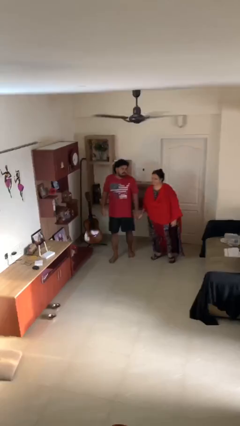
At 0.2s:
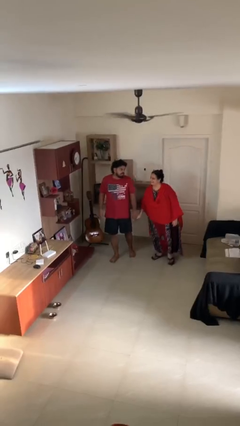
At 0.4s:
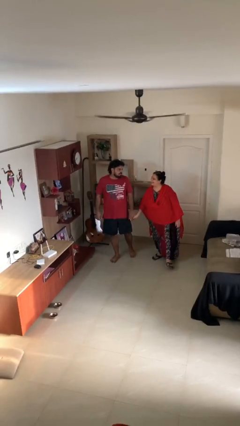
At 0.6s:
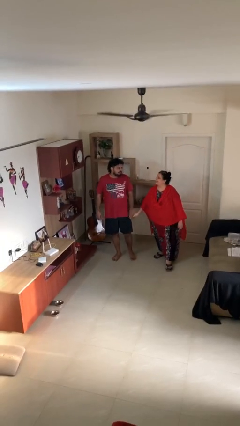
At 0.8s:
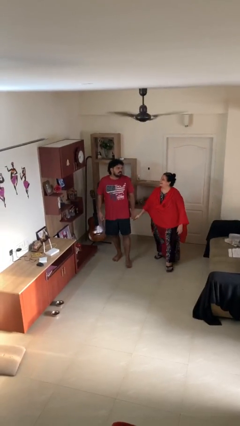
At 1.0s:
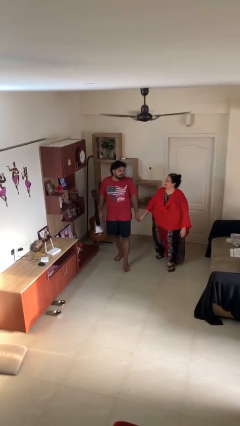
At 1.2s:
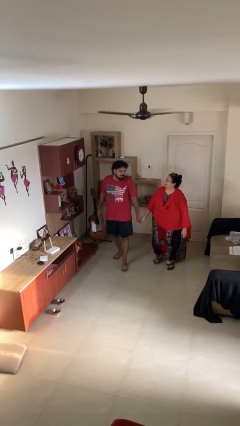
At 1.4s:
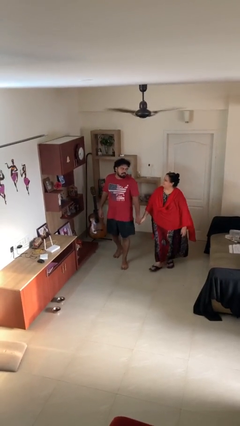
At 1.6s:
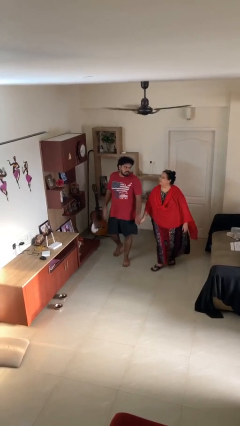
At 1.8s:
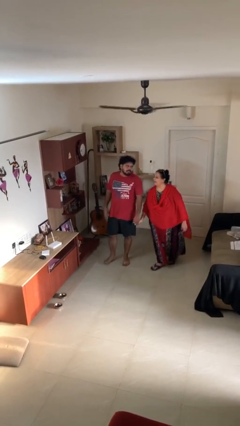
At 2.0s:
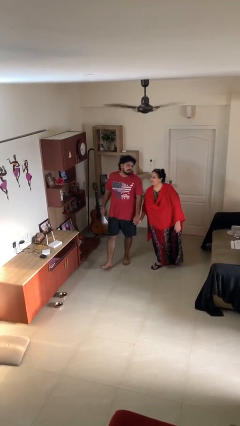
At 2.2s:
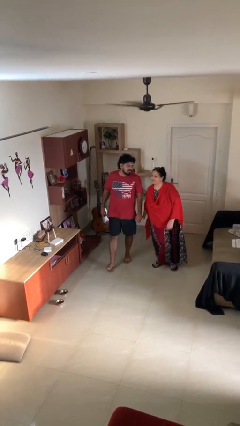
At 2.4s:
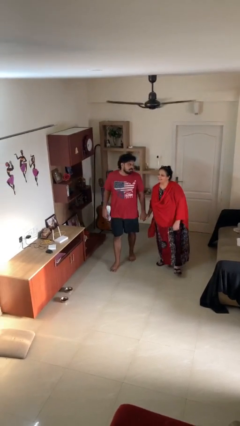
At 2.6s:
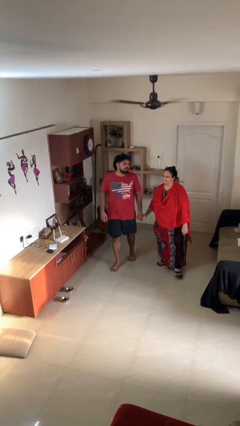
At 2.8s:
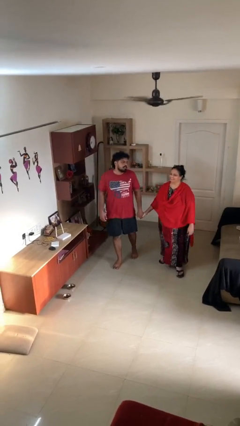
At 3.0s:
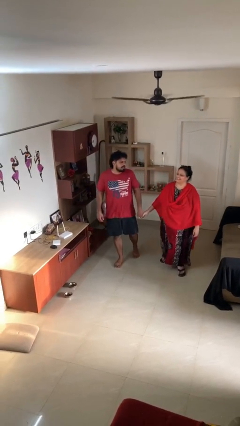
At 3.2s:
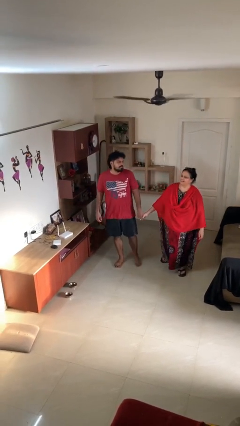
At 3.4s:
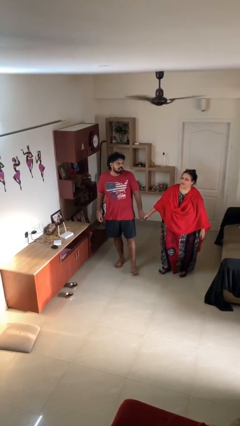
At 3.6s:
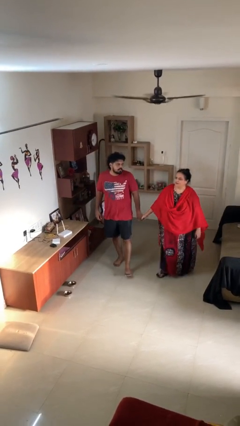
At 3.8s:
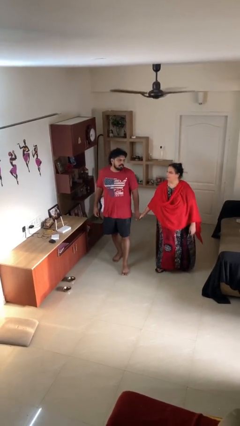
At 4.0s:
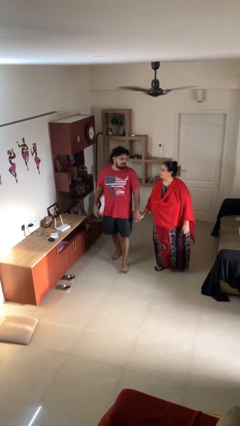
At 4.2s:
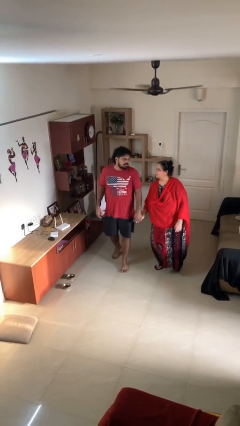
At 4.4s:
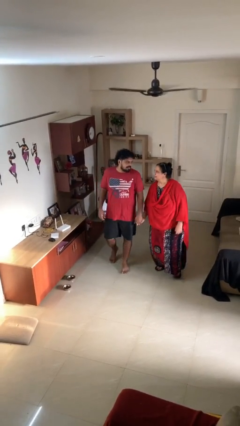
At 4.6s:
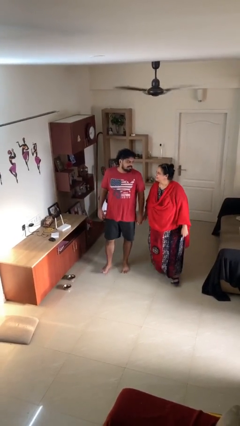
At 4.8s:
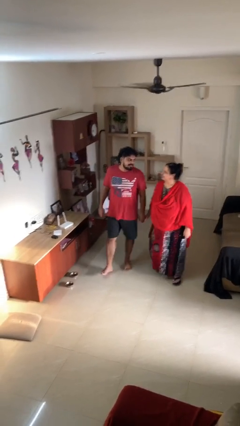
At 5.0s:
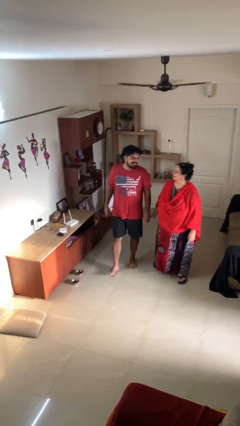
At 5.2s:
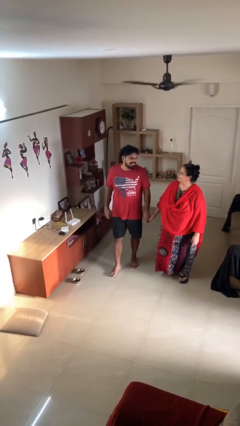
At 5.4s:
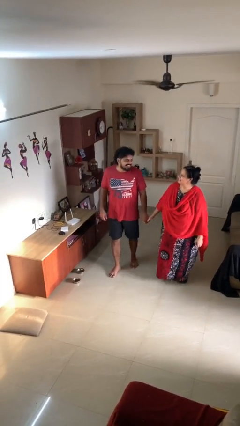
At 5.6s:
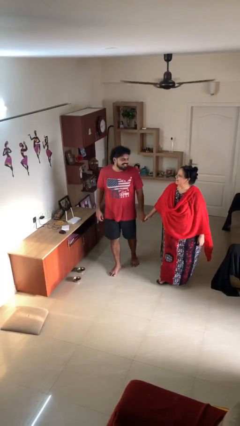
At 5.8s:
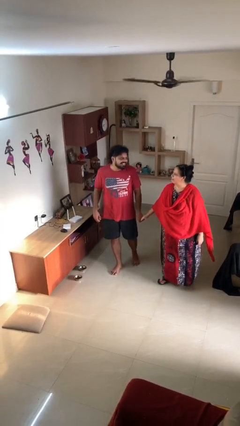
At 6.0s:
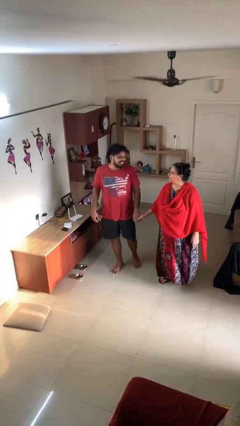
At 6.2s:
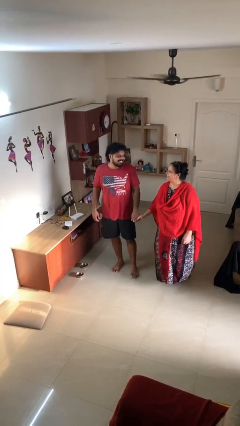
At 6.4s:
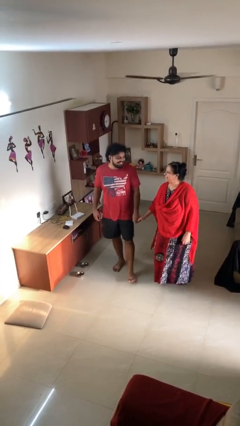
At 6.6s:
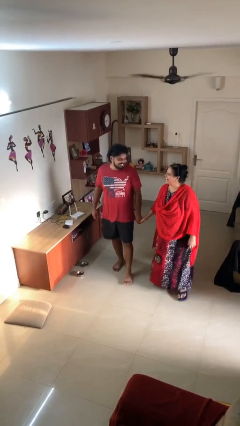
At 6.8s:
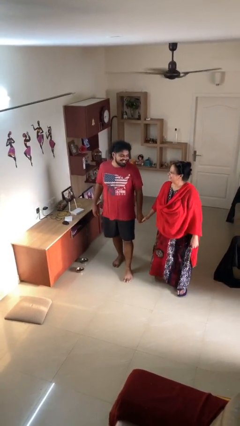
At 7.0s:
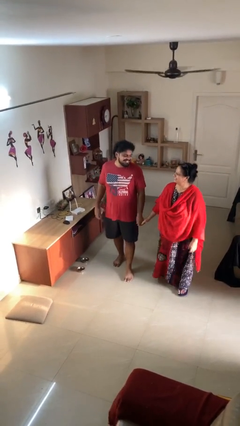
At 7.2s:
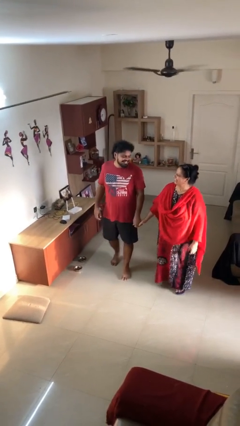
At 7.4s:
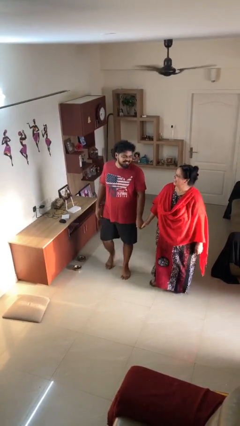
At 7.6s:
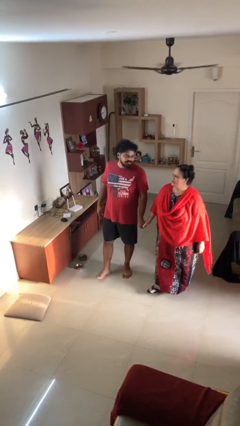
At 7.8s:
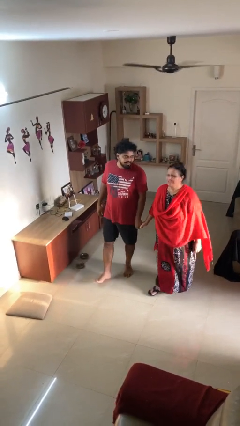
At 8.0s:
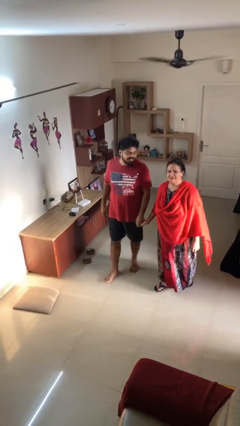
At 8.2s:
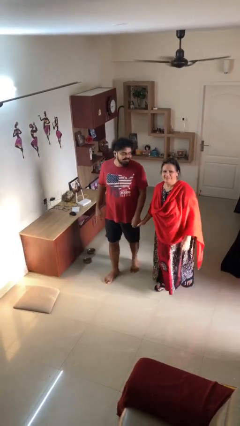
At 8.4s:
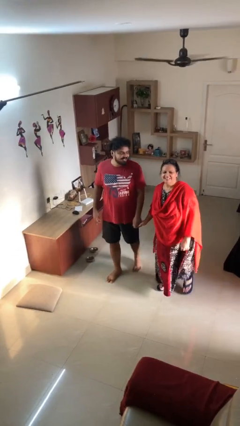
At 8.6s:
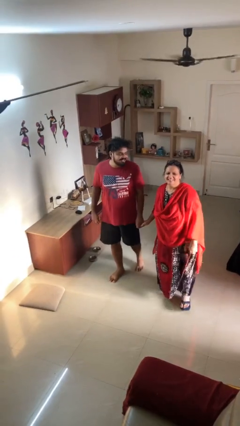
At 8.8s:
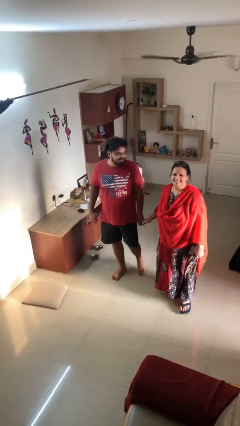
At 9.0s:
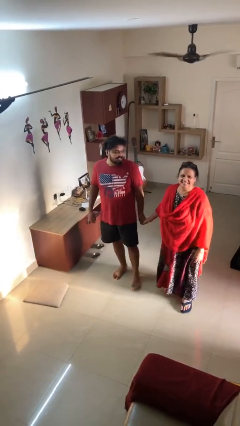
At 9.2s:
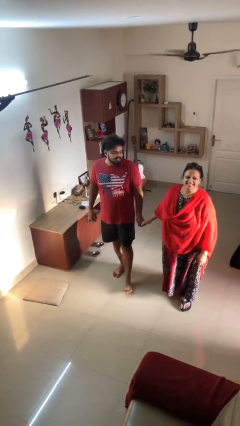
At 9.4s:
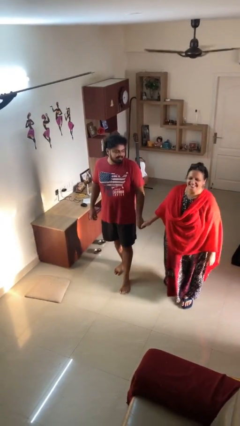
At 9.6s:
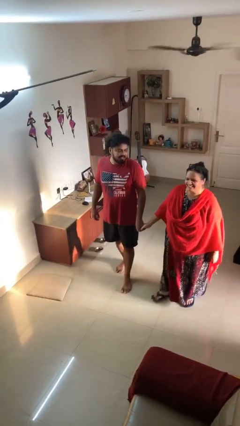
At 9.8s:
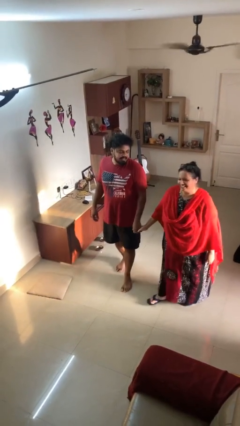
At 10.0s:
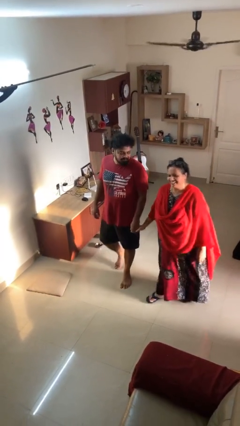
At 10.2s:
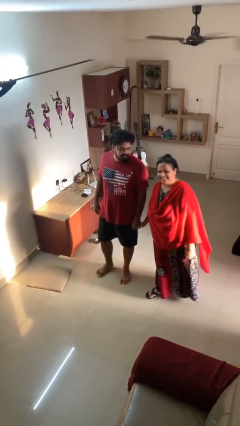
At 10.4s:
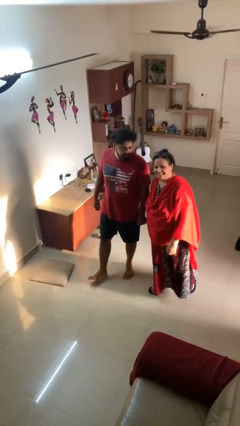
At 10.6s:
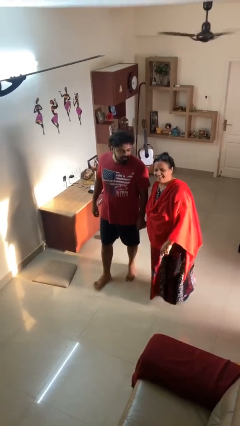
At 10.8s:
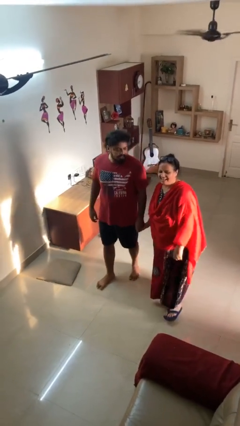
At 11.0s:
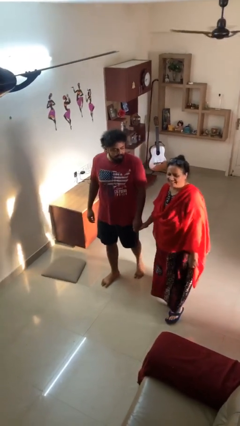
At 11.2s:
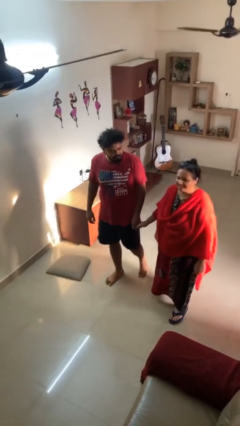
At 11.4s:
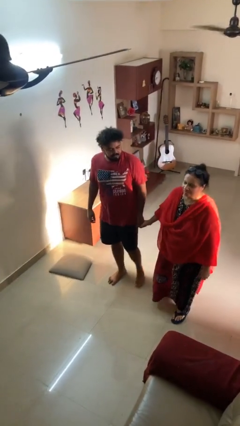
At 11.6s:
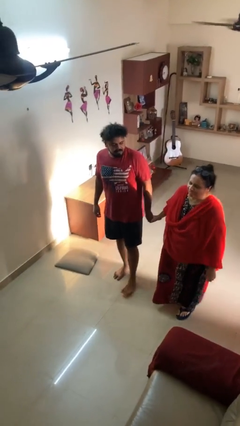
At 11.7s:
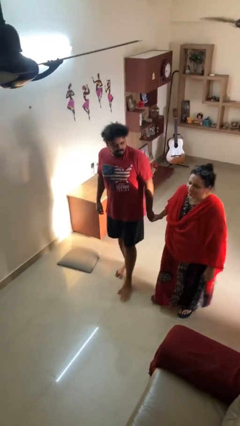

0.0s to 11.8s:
person holds hand

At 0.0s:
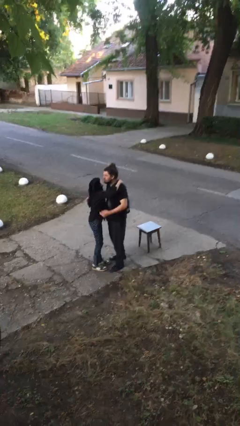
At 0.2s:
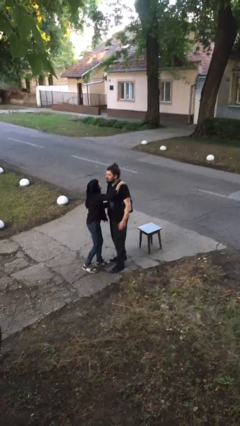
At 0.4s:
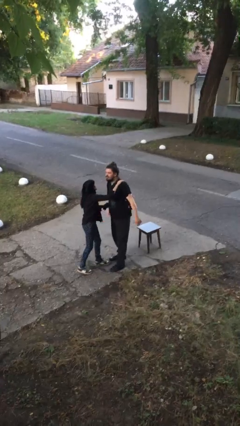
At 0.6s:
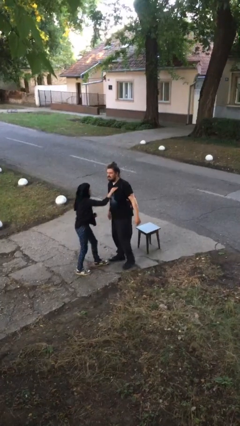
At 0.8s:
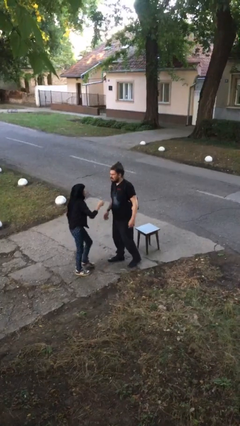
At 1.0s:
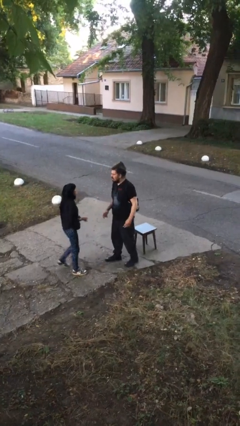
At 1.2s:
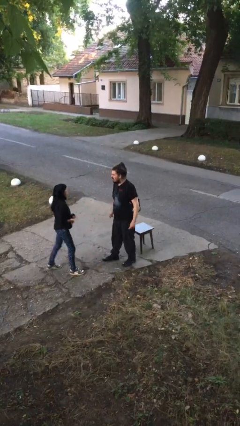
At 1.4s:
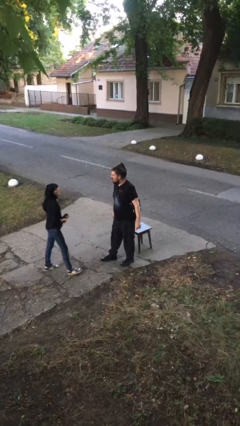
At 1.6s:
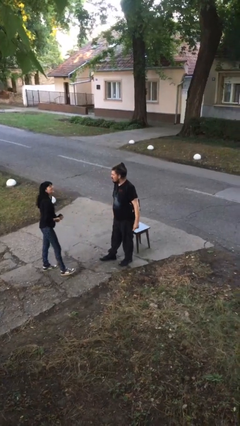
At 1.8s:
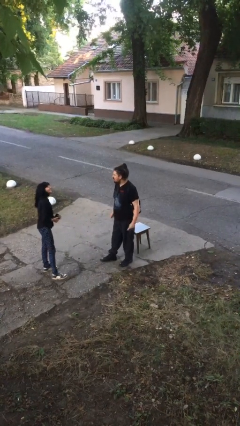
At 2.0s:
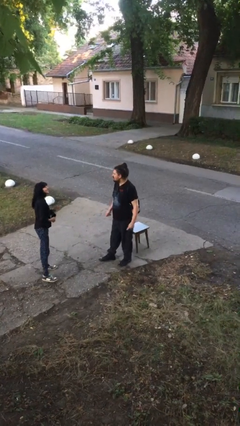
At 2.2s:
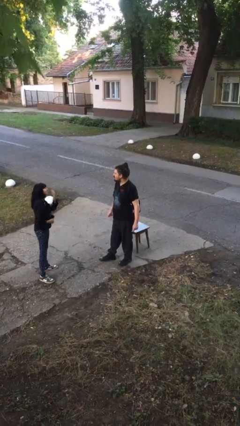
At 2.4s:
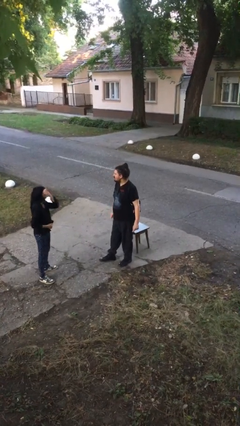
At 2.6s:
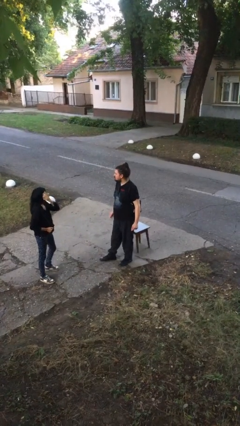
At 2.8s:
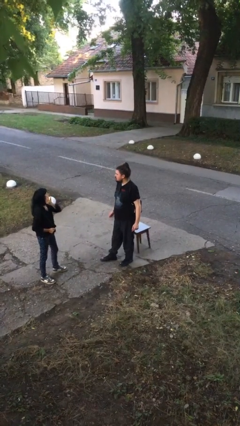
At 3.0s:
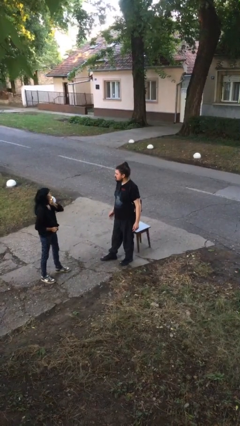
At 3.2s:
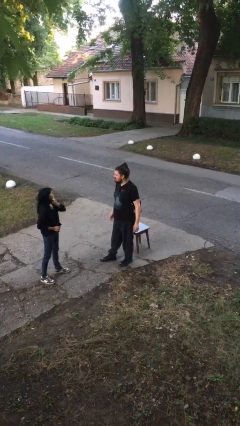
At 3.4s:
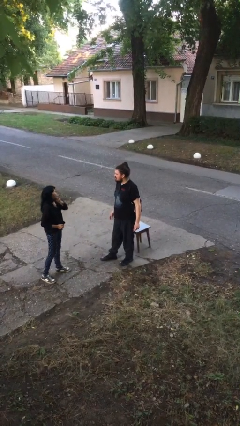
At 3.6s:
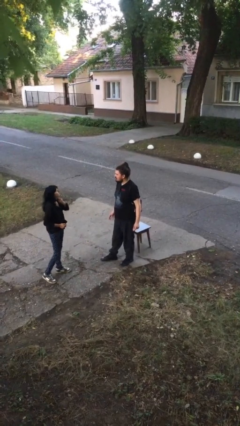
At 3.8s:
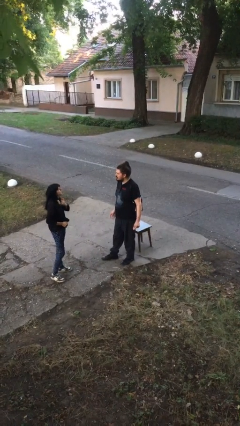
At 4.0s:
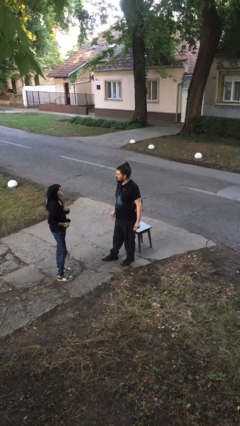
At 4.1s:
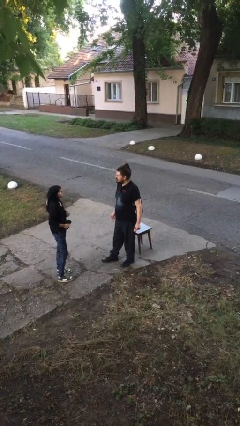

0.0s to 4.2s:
person talks to person

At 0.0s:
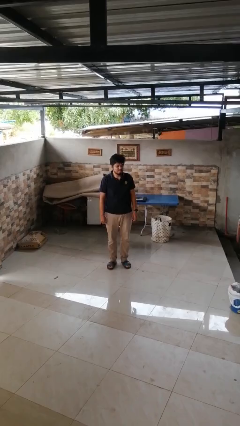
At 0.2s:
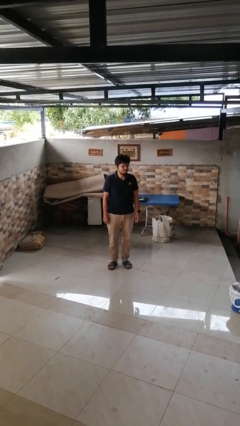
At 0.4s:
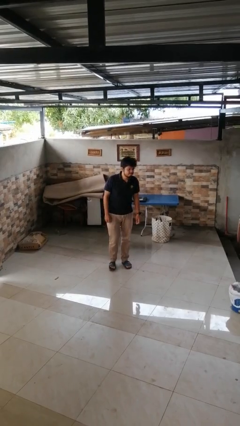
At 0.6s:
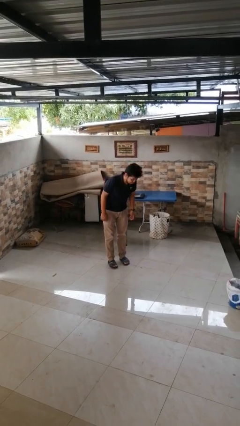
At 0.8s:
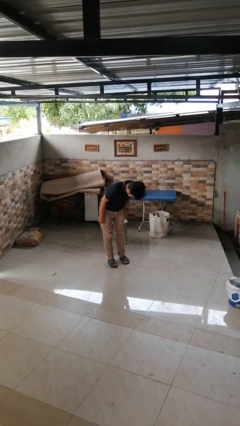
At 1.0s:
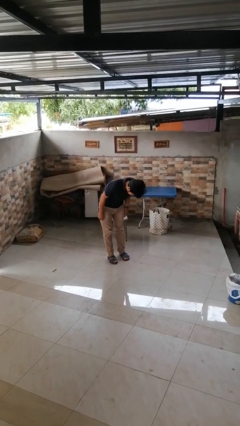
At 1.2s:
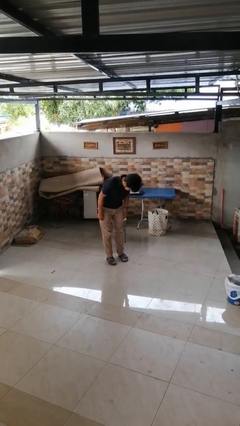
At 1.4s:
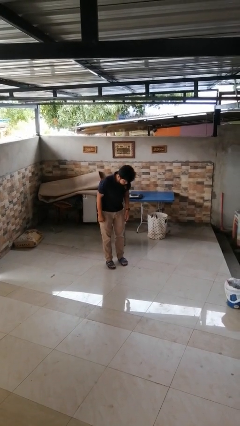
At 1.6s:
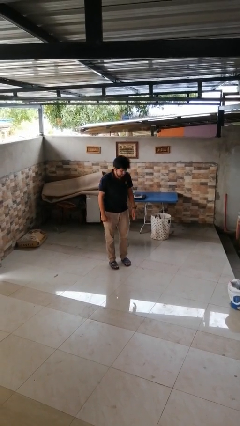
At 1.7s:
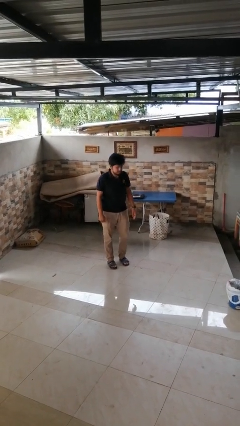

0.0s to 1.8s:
person bows

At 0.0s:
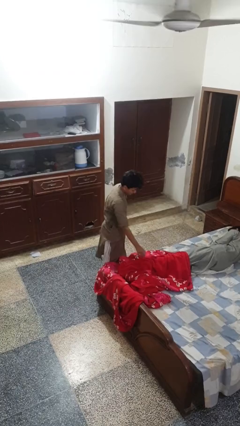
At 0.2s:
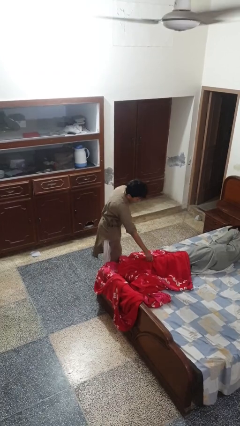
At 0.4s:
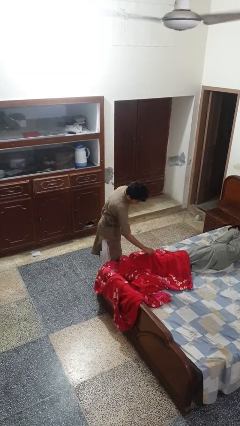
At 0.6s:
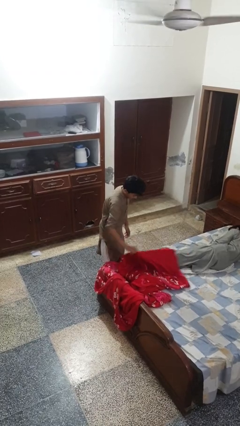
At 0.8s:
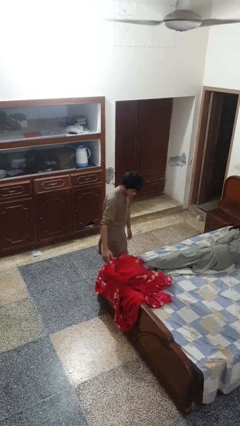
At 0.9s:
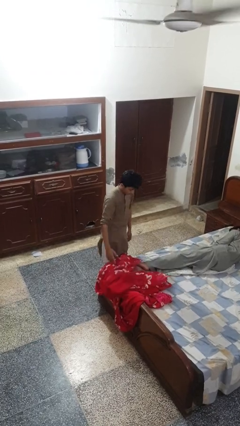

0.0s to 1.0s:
person uncovers friend with blanket
